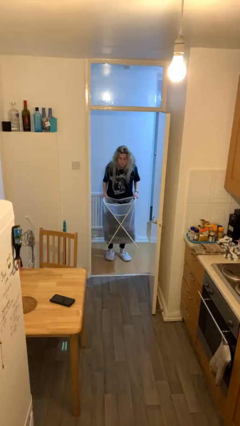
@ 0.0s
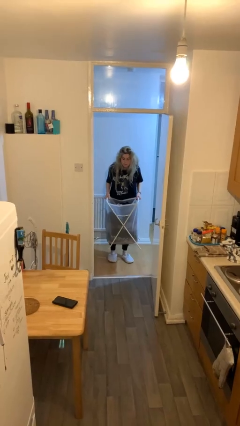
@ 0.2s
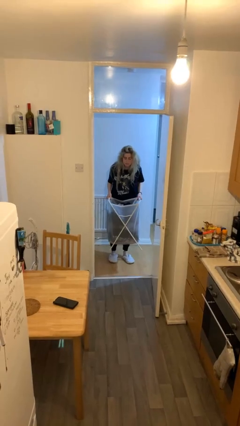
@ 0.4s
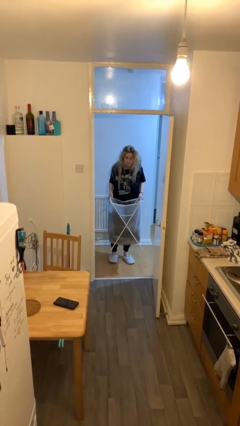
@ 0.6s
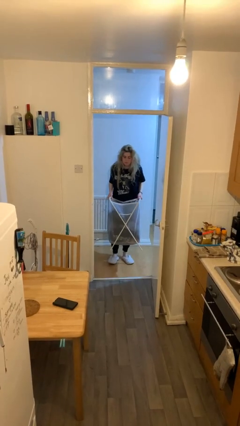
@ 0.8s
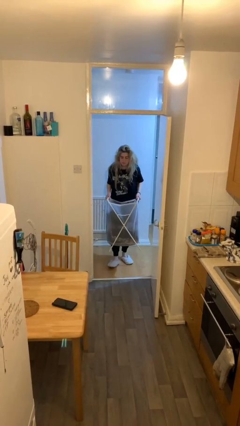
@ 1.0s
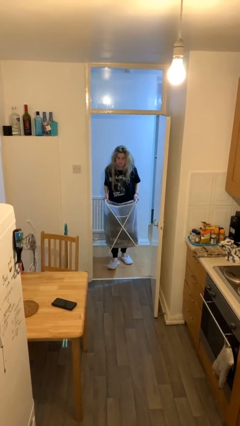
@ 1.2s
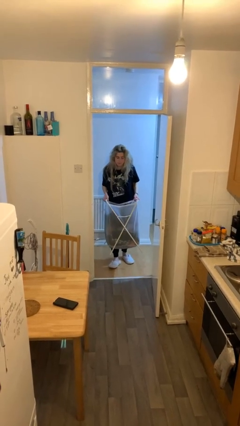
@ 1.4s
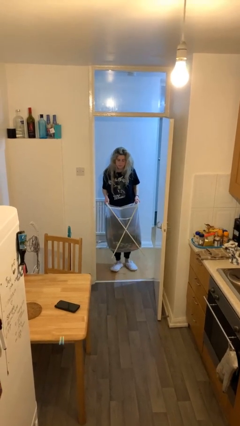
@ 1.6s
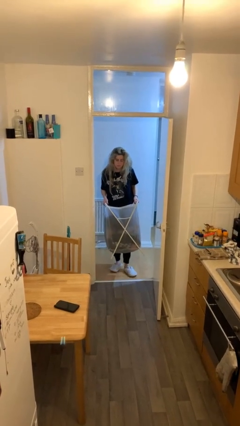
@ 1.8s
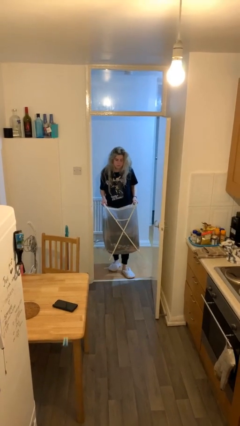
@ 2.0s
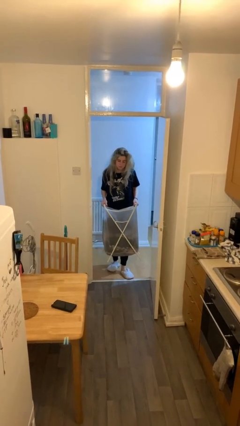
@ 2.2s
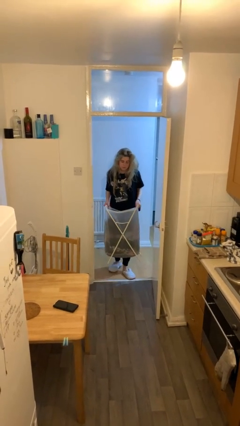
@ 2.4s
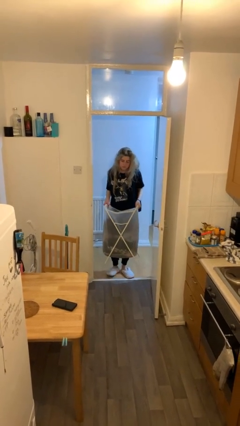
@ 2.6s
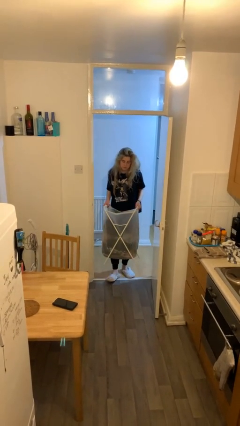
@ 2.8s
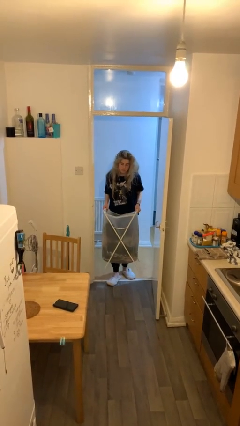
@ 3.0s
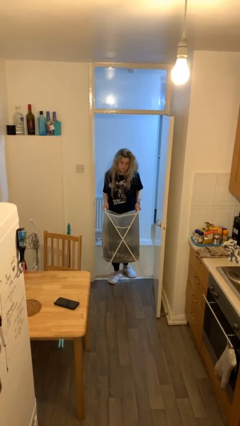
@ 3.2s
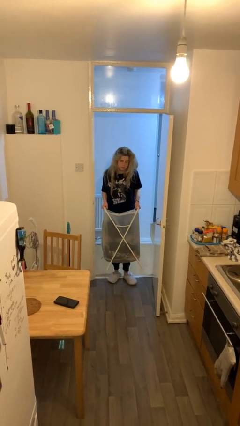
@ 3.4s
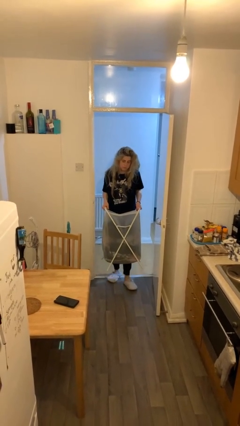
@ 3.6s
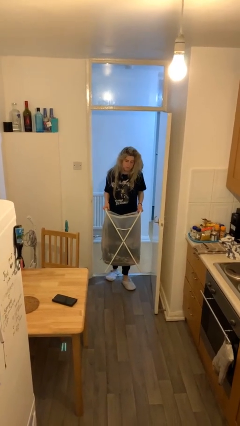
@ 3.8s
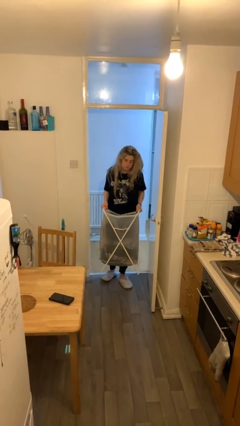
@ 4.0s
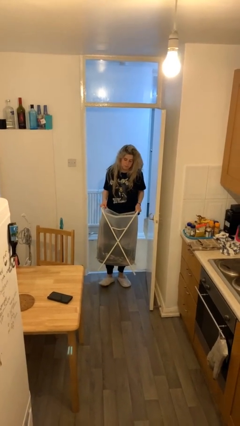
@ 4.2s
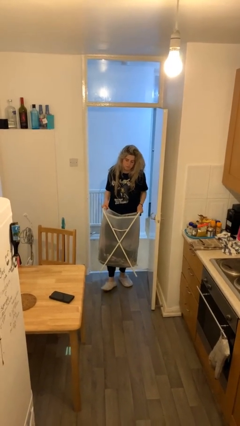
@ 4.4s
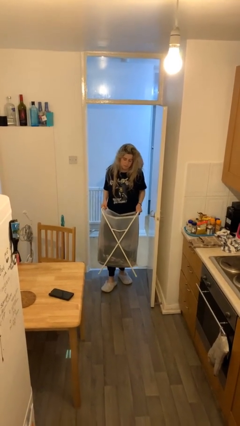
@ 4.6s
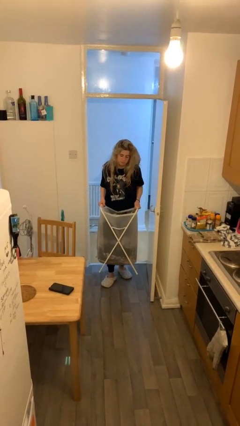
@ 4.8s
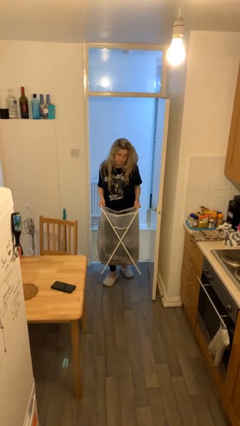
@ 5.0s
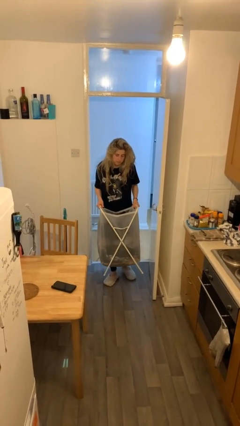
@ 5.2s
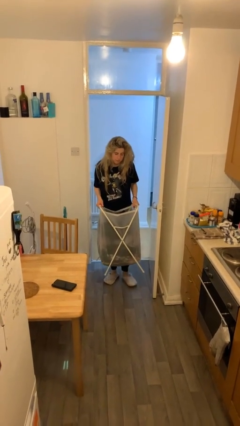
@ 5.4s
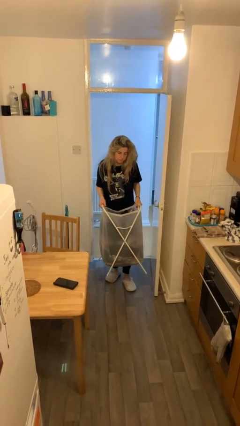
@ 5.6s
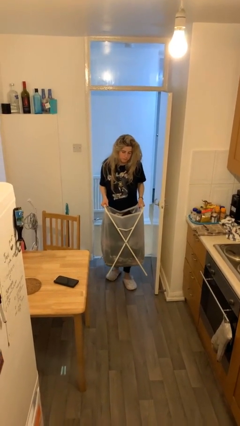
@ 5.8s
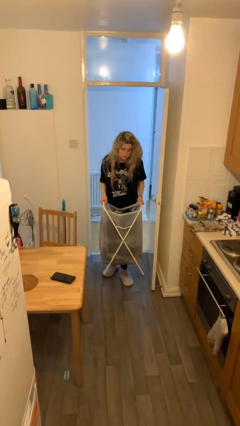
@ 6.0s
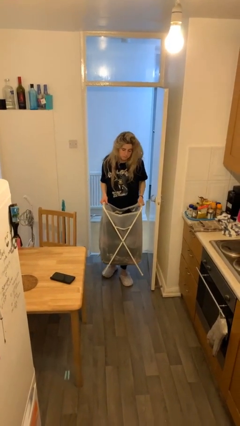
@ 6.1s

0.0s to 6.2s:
person carries heavy object

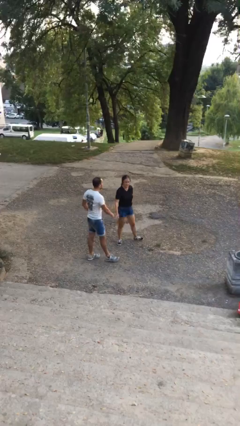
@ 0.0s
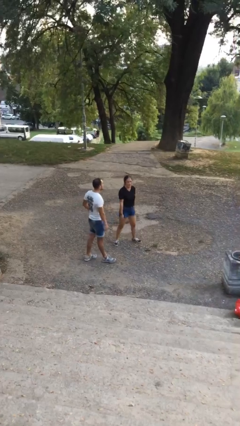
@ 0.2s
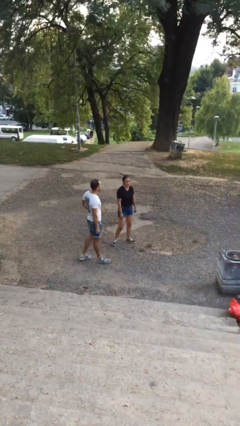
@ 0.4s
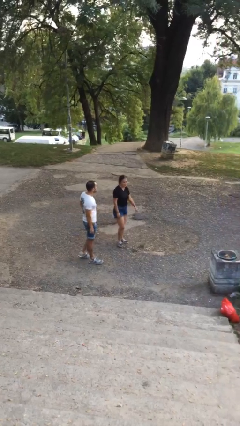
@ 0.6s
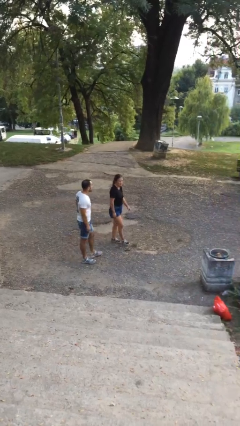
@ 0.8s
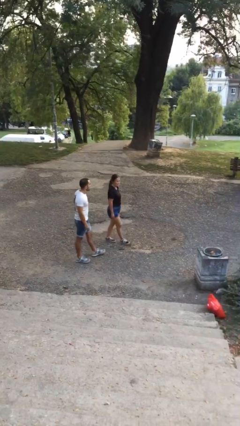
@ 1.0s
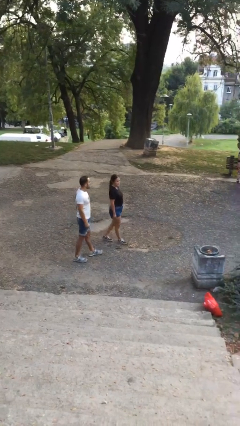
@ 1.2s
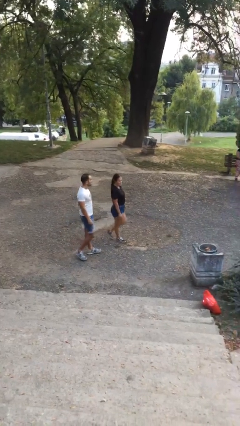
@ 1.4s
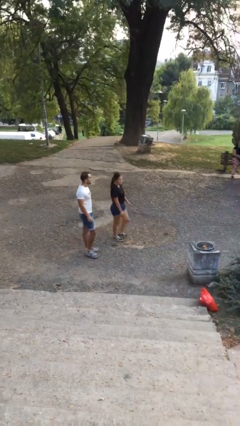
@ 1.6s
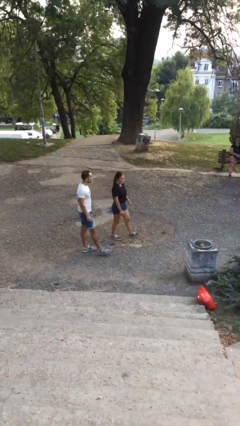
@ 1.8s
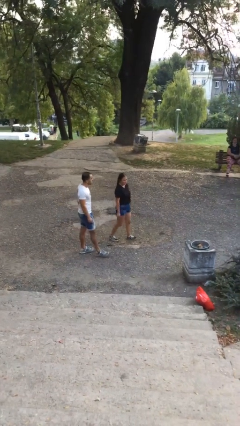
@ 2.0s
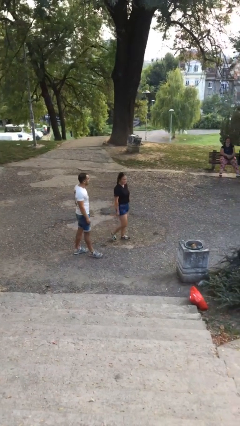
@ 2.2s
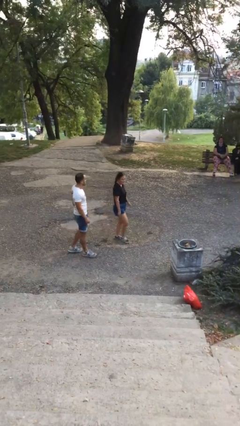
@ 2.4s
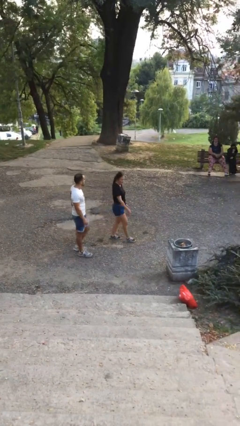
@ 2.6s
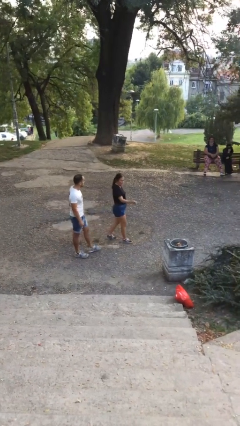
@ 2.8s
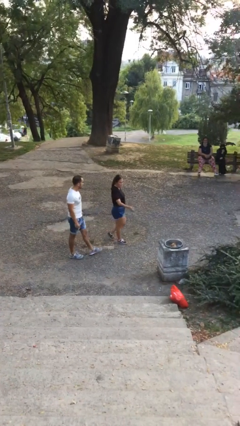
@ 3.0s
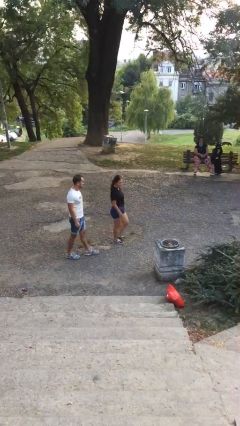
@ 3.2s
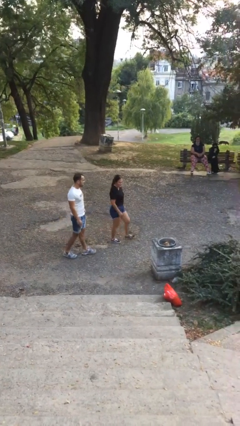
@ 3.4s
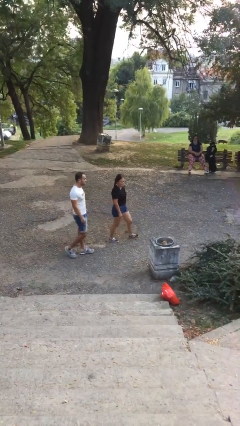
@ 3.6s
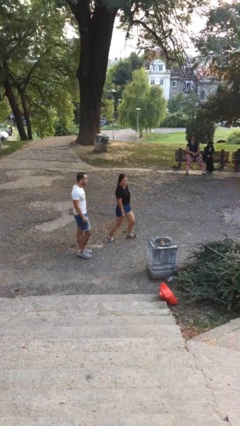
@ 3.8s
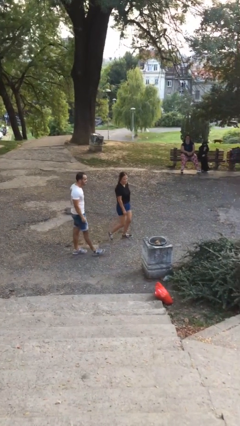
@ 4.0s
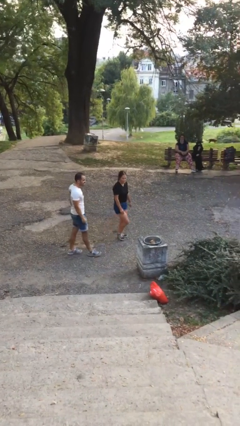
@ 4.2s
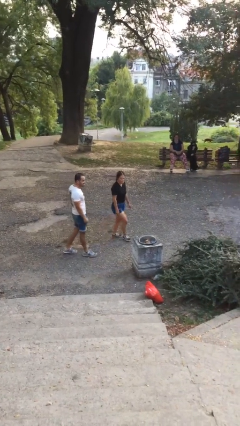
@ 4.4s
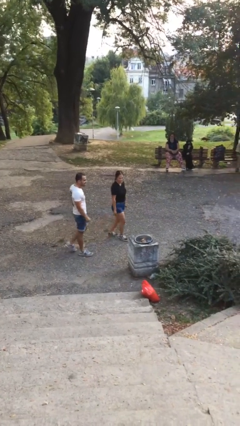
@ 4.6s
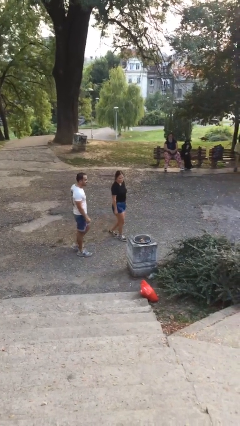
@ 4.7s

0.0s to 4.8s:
person talks to person

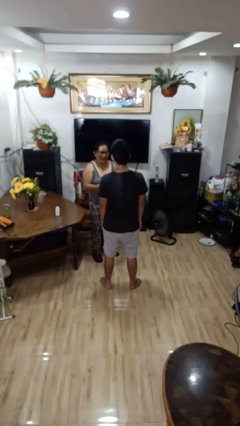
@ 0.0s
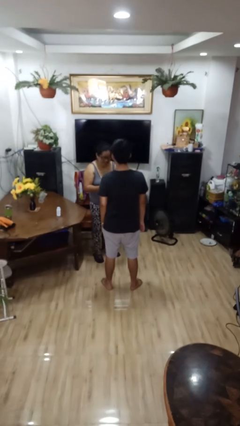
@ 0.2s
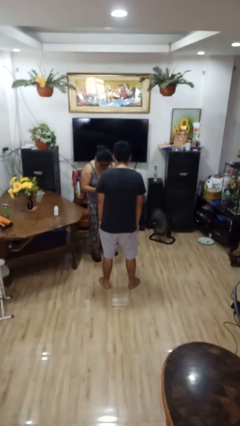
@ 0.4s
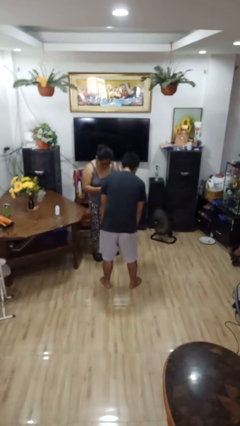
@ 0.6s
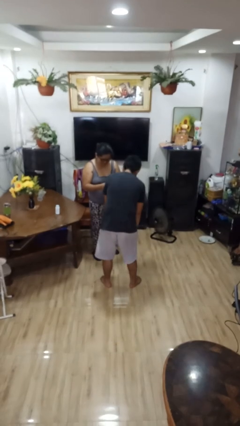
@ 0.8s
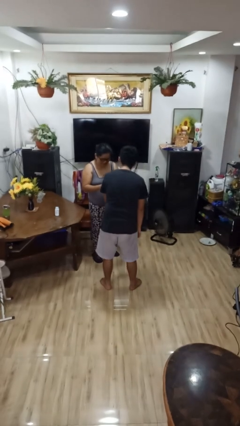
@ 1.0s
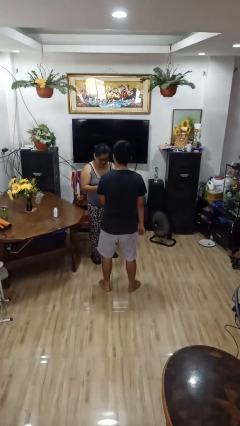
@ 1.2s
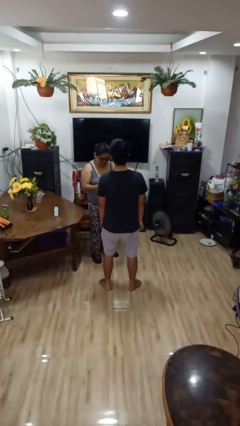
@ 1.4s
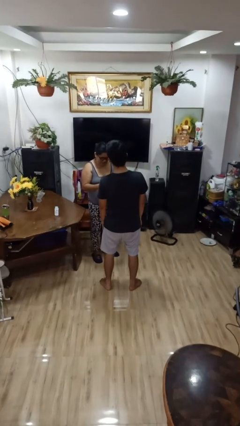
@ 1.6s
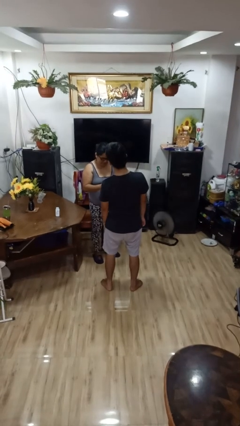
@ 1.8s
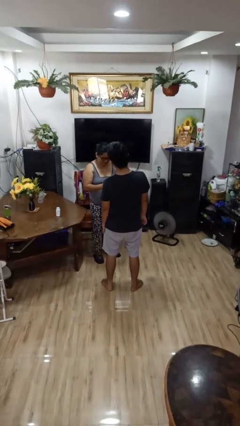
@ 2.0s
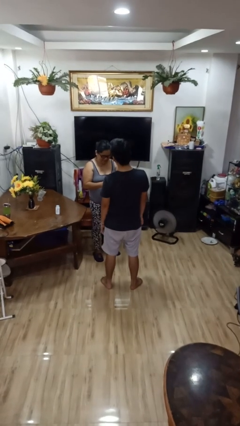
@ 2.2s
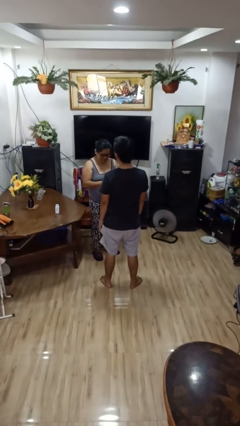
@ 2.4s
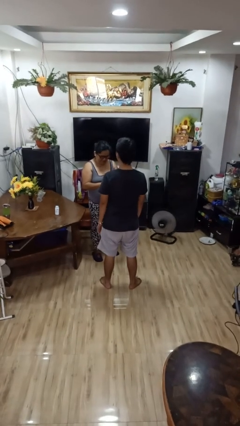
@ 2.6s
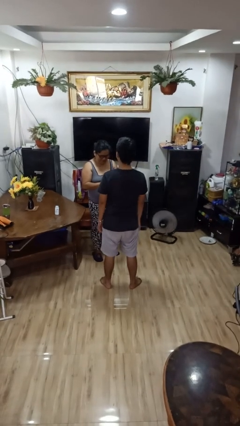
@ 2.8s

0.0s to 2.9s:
person laughs with person

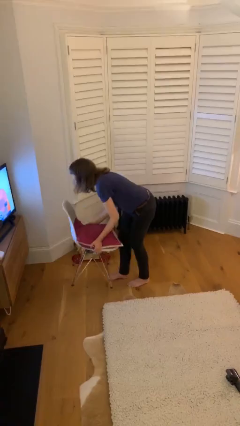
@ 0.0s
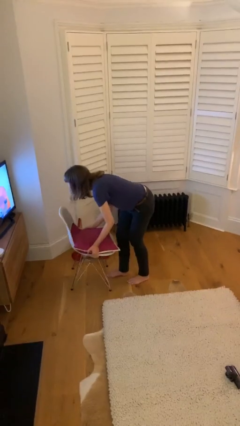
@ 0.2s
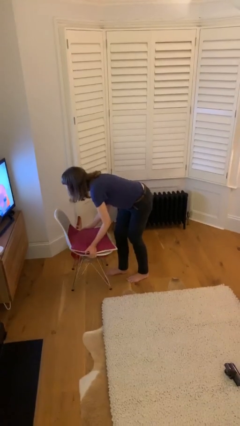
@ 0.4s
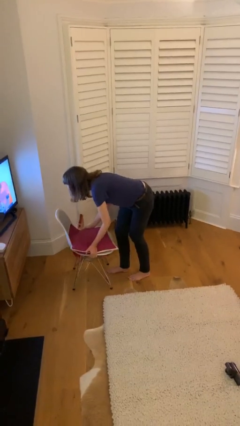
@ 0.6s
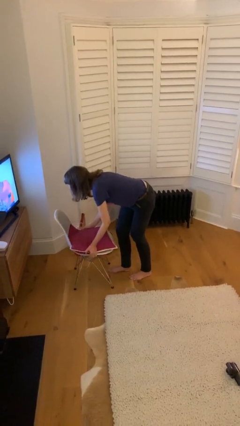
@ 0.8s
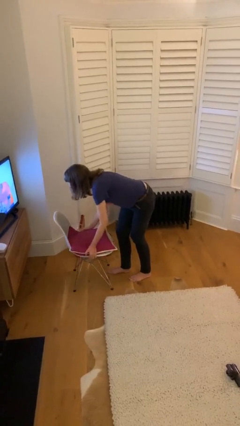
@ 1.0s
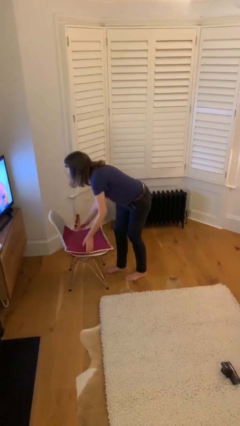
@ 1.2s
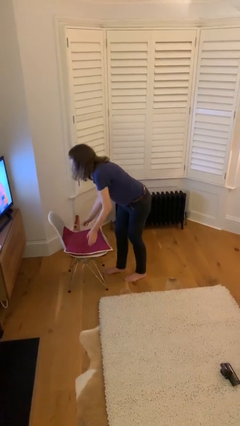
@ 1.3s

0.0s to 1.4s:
person puts down object on floor

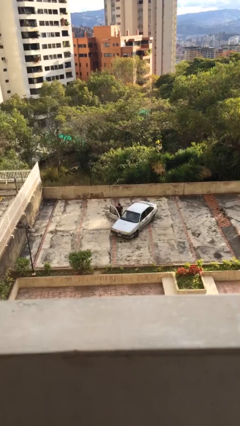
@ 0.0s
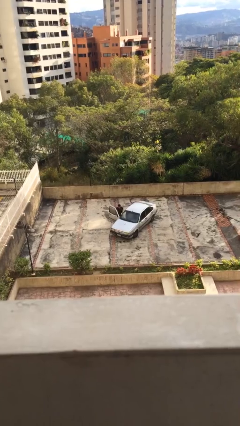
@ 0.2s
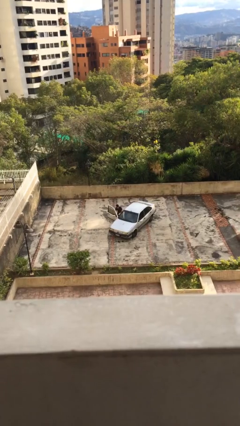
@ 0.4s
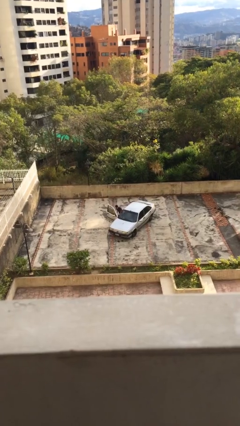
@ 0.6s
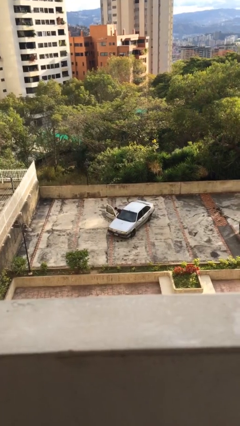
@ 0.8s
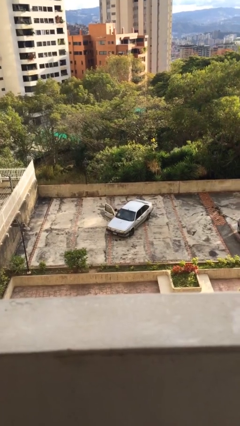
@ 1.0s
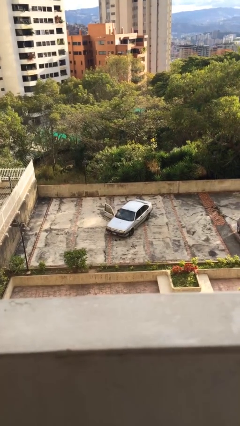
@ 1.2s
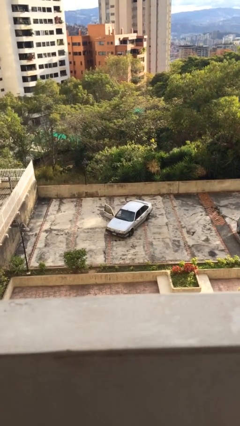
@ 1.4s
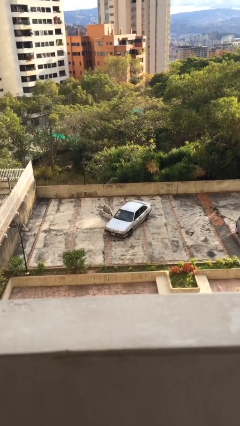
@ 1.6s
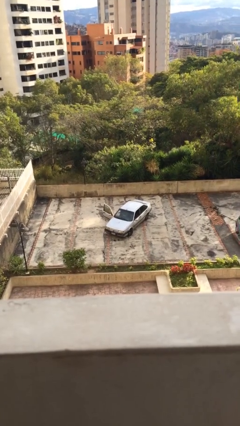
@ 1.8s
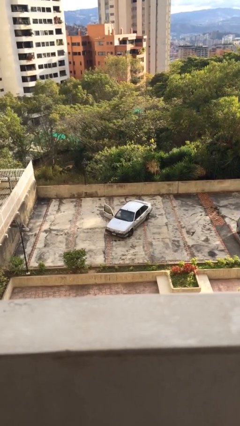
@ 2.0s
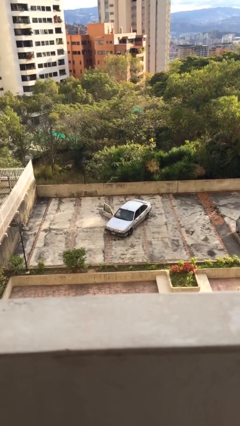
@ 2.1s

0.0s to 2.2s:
person enters car

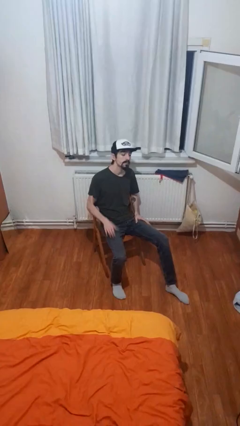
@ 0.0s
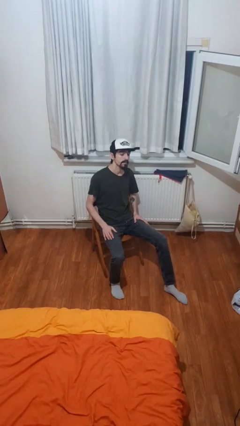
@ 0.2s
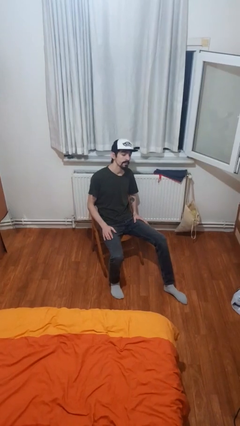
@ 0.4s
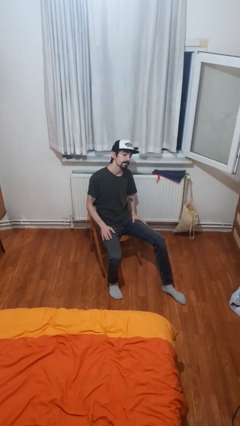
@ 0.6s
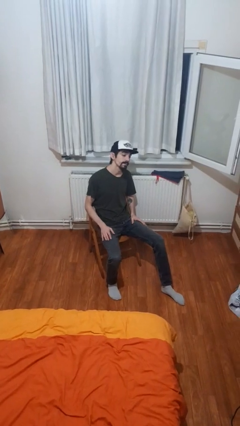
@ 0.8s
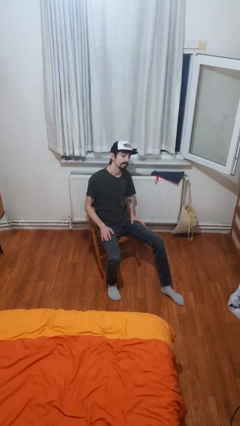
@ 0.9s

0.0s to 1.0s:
person slaps hands on thighs
